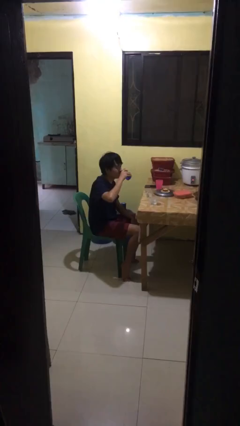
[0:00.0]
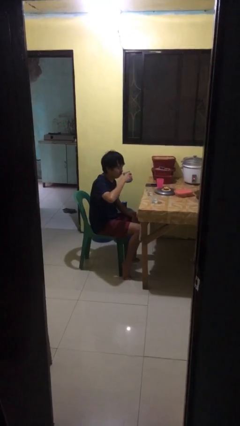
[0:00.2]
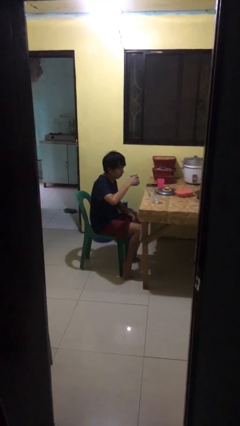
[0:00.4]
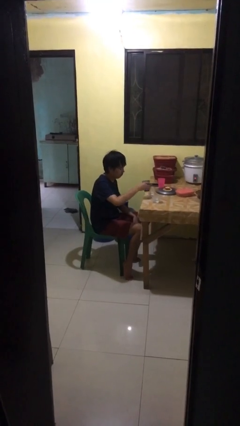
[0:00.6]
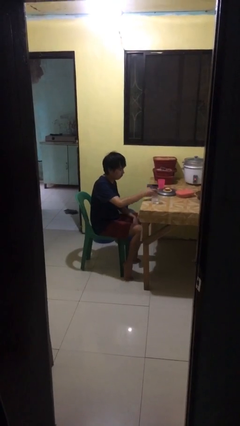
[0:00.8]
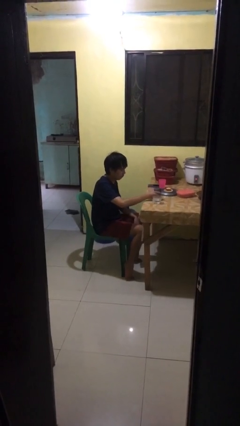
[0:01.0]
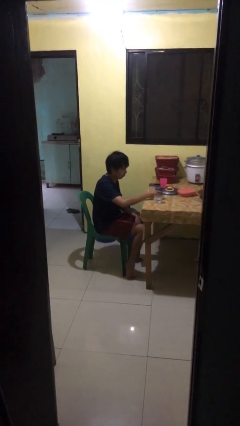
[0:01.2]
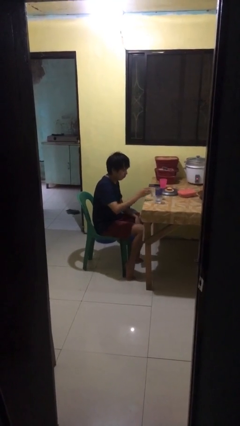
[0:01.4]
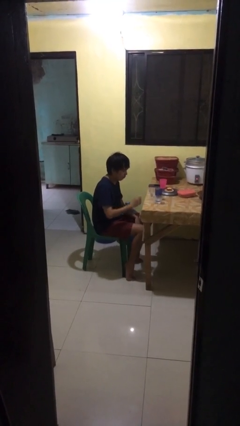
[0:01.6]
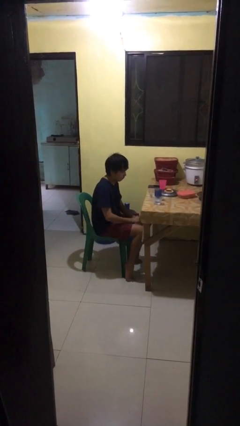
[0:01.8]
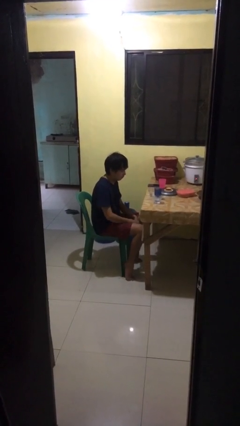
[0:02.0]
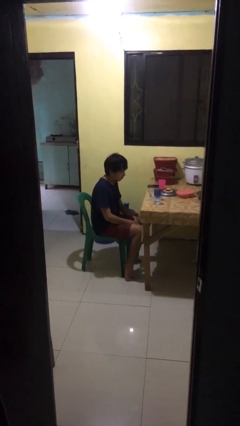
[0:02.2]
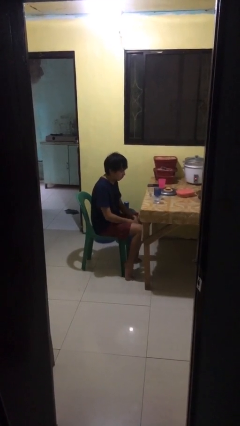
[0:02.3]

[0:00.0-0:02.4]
person puts down object on table

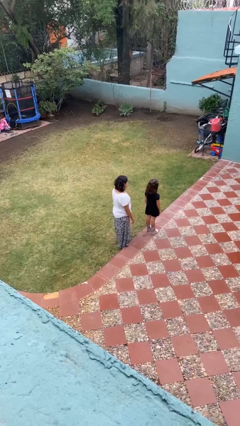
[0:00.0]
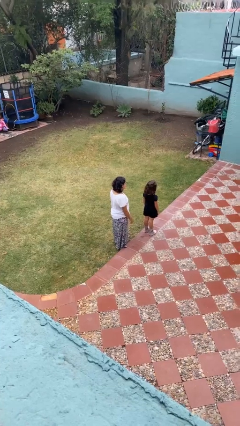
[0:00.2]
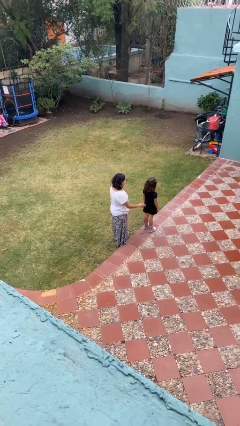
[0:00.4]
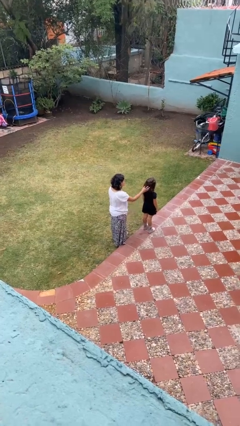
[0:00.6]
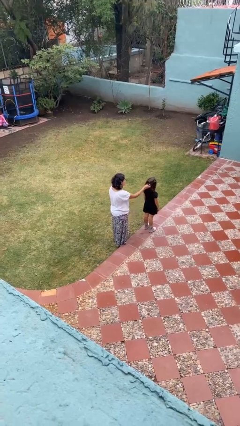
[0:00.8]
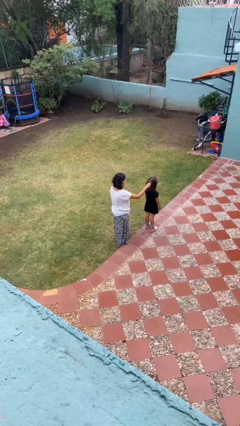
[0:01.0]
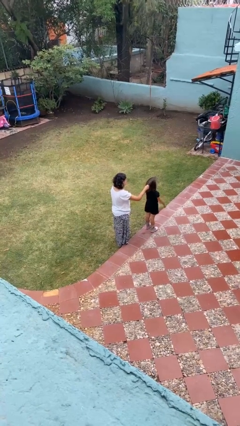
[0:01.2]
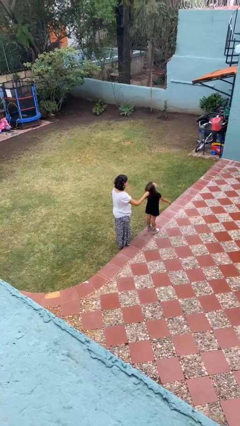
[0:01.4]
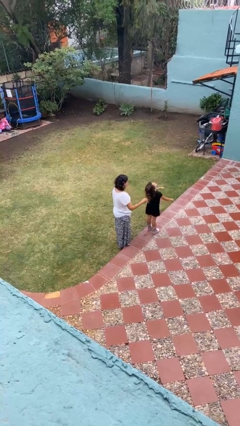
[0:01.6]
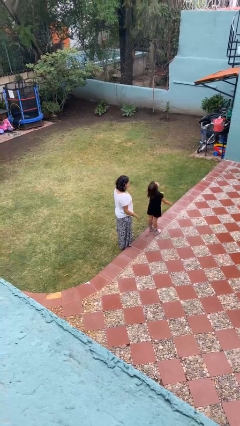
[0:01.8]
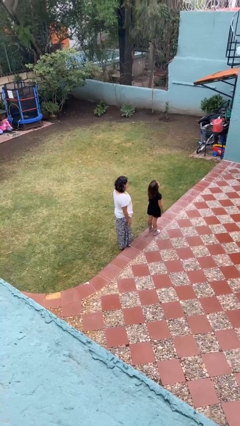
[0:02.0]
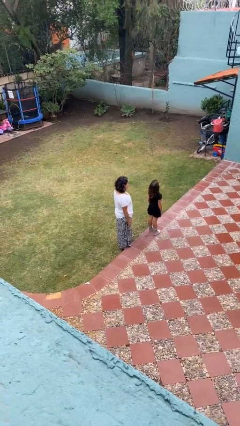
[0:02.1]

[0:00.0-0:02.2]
person grabs person by hair

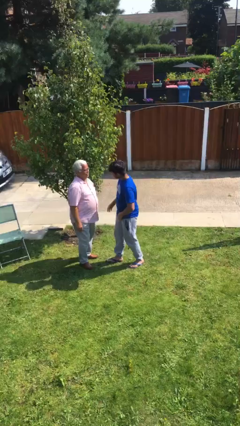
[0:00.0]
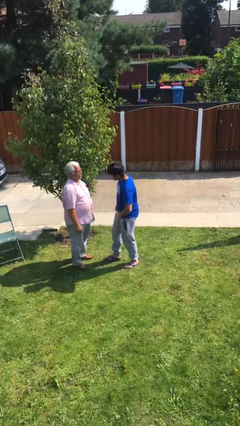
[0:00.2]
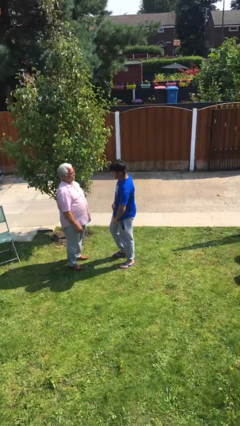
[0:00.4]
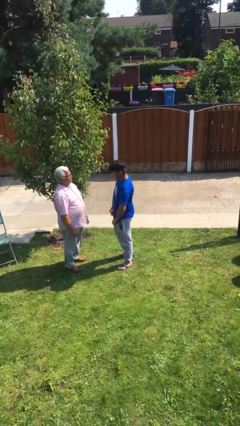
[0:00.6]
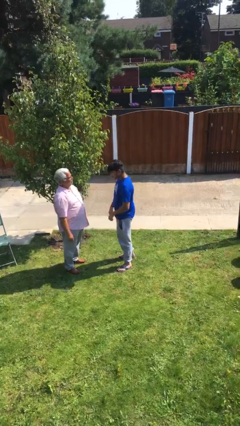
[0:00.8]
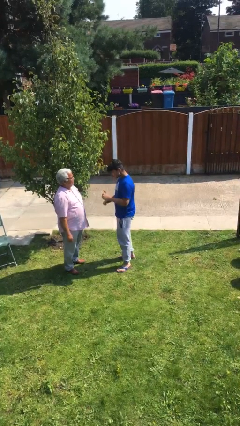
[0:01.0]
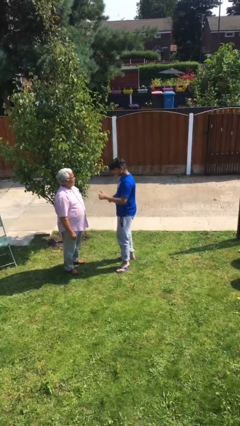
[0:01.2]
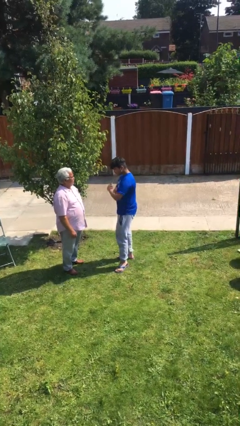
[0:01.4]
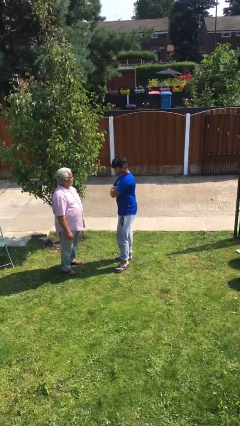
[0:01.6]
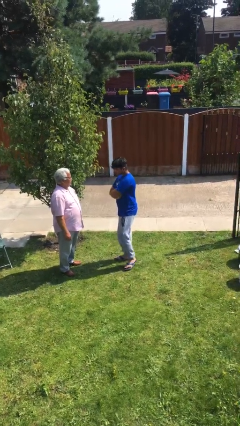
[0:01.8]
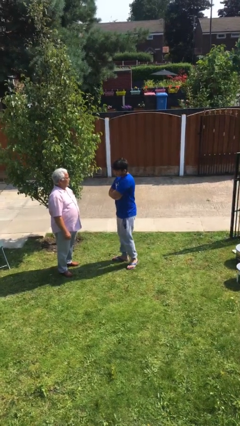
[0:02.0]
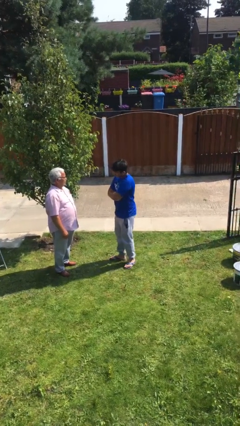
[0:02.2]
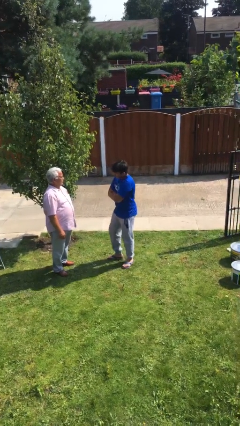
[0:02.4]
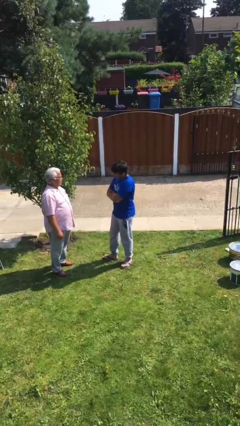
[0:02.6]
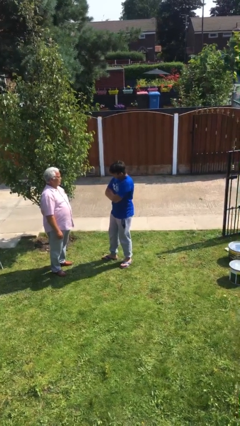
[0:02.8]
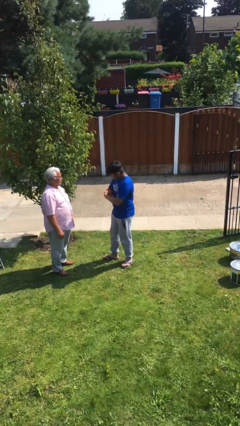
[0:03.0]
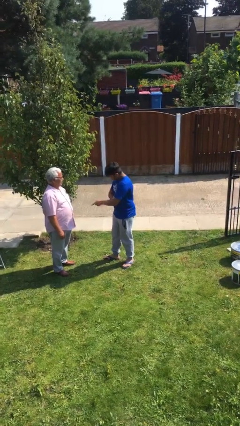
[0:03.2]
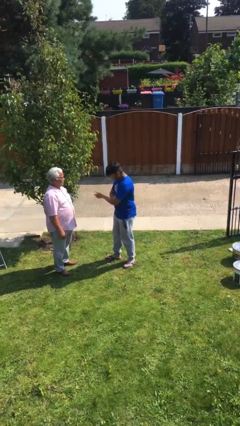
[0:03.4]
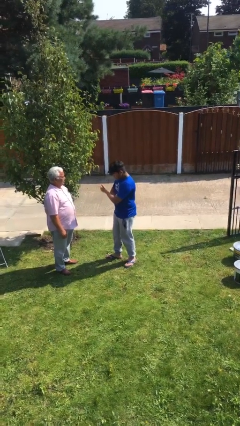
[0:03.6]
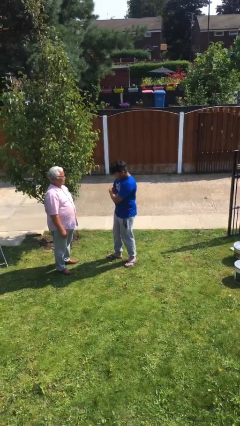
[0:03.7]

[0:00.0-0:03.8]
person talks to person

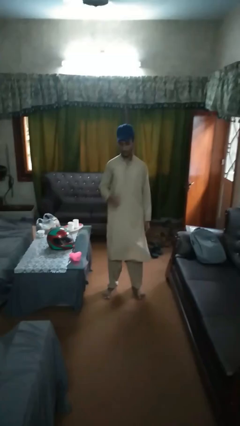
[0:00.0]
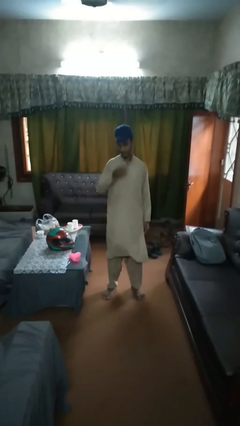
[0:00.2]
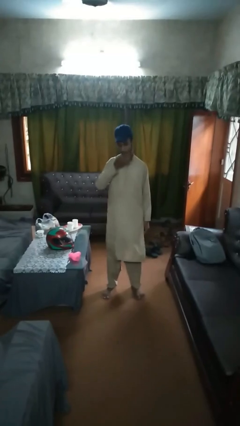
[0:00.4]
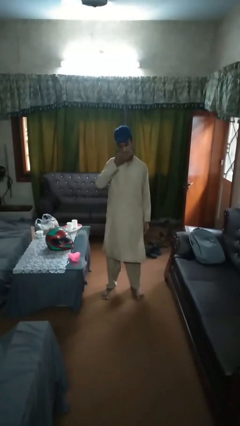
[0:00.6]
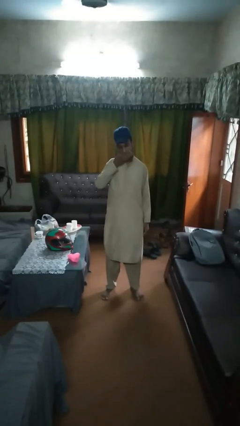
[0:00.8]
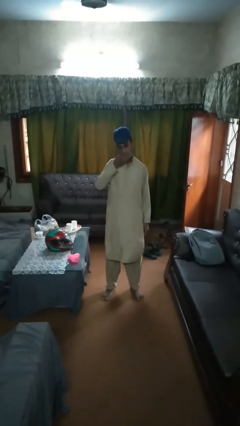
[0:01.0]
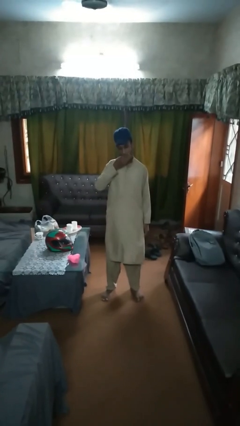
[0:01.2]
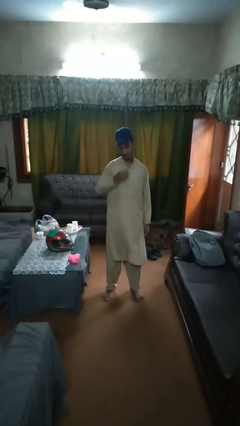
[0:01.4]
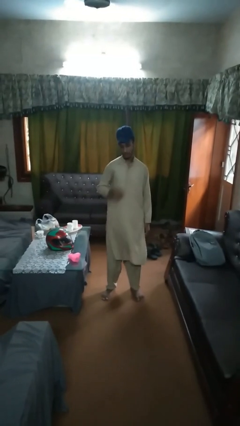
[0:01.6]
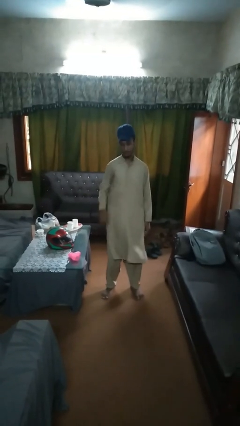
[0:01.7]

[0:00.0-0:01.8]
person eats banana

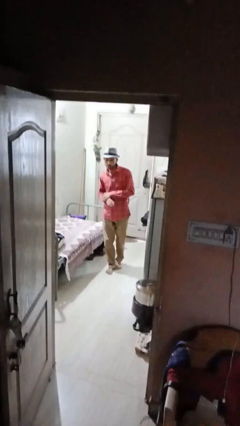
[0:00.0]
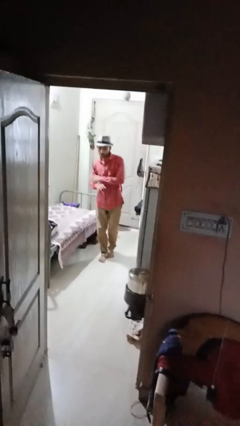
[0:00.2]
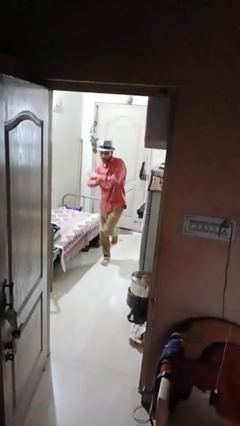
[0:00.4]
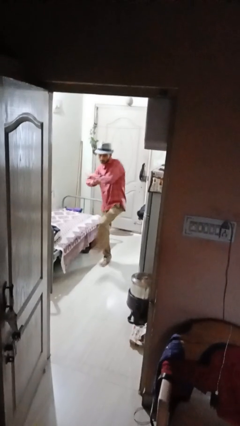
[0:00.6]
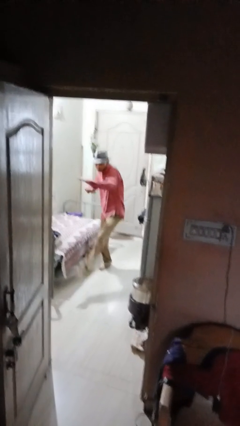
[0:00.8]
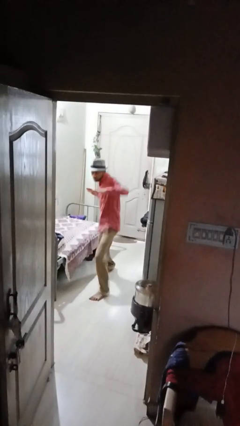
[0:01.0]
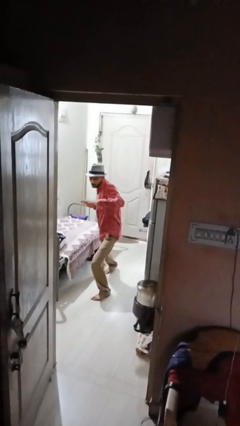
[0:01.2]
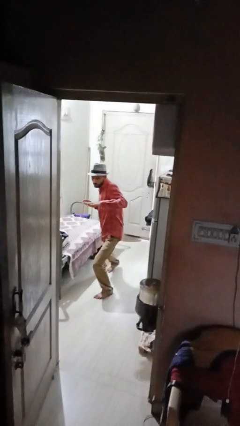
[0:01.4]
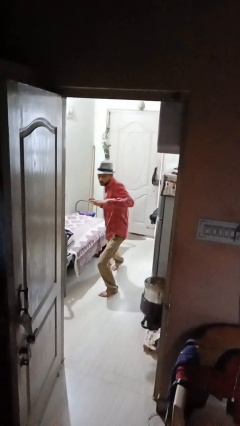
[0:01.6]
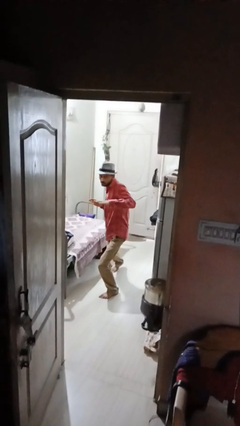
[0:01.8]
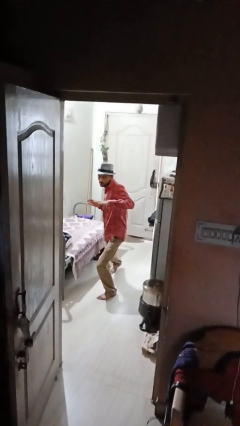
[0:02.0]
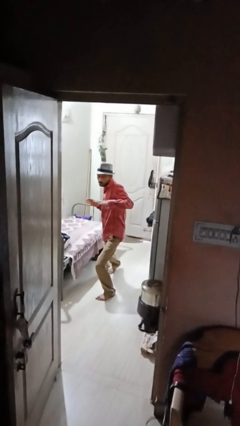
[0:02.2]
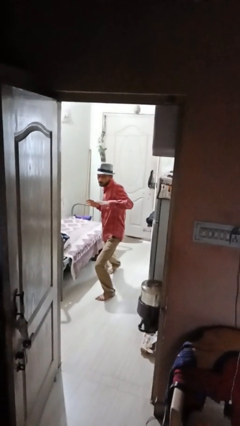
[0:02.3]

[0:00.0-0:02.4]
person karate chop

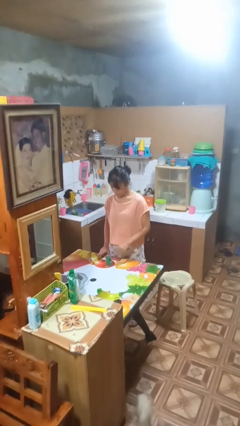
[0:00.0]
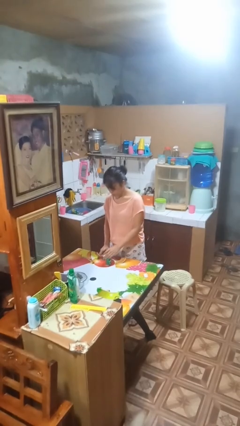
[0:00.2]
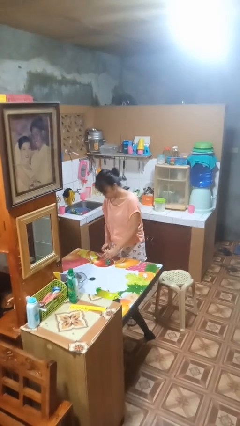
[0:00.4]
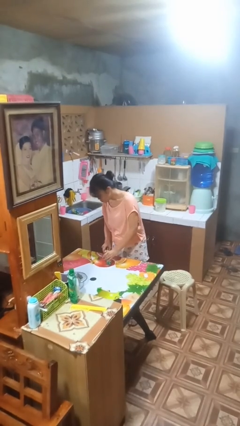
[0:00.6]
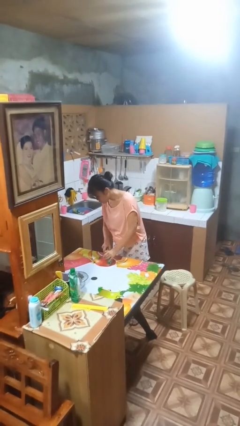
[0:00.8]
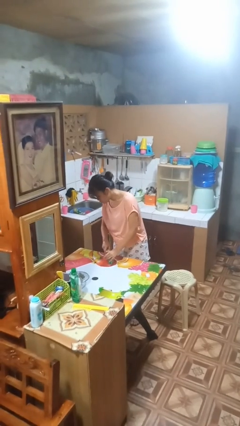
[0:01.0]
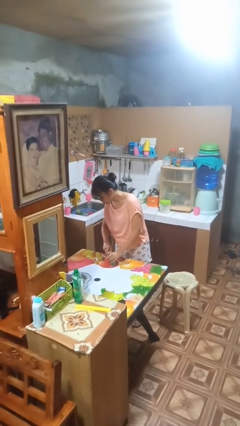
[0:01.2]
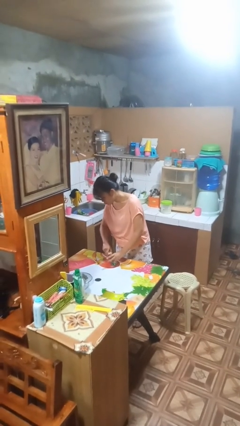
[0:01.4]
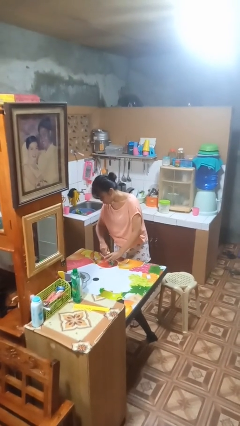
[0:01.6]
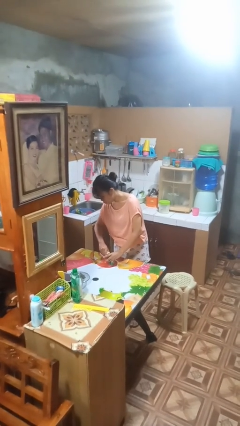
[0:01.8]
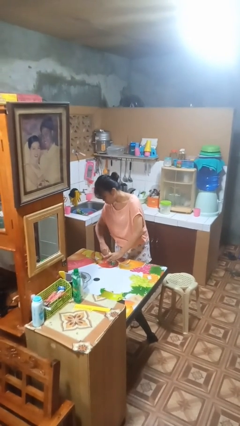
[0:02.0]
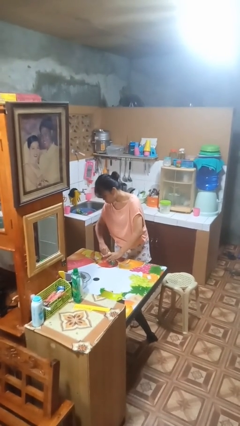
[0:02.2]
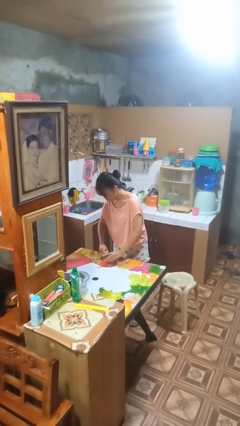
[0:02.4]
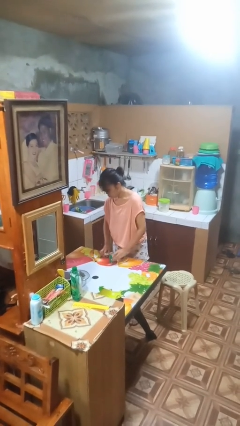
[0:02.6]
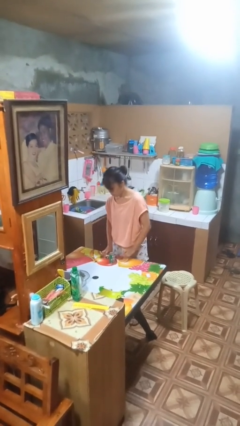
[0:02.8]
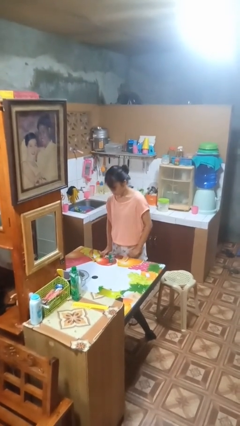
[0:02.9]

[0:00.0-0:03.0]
person opens can with can opener

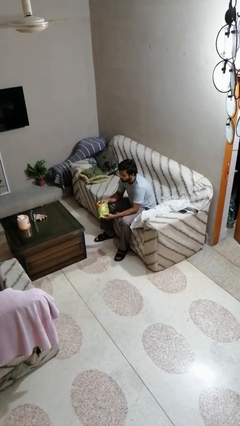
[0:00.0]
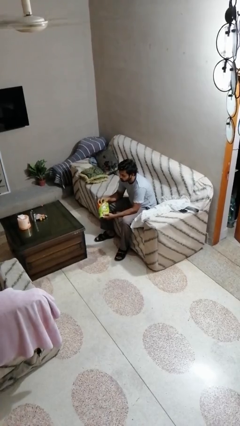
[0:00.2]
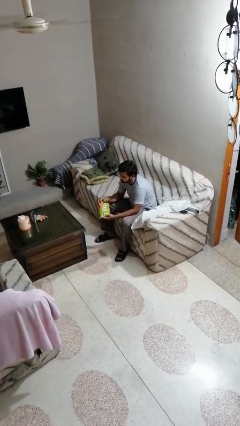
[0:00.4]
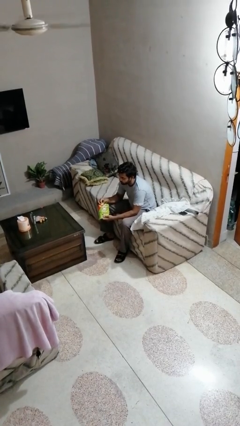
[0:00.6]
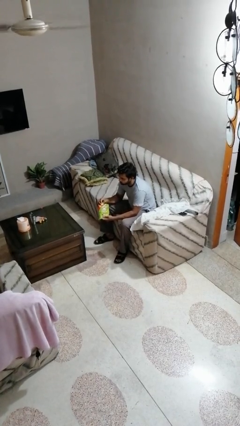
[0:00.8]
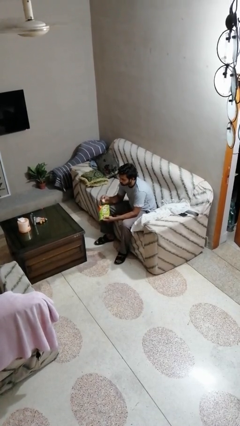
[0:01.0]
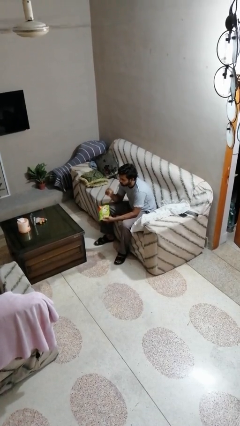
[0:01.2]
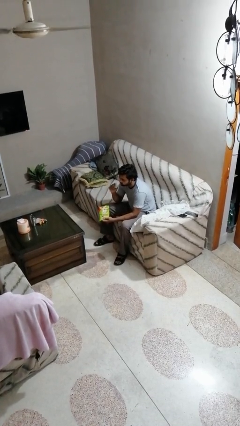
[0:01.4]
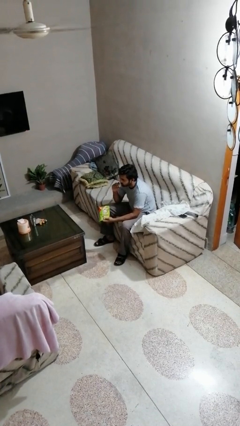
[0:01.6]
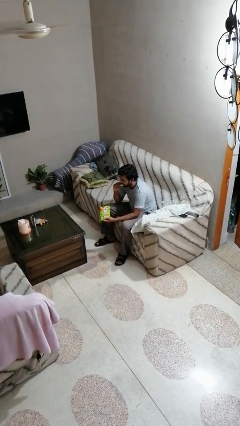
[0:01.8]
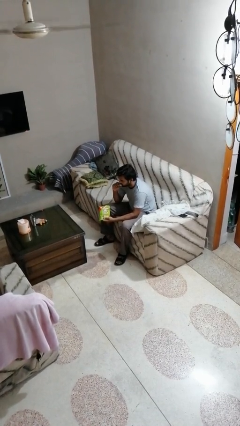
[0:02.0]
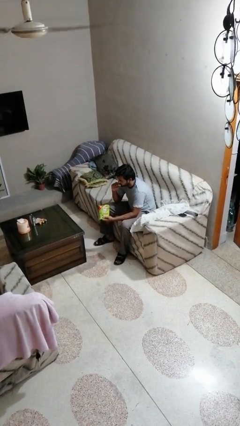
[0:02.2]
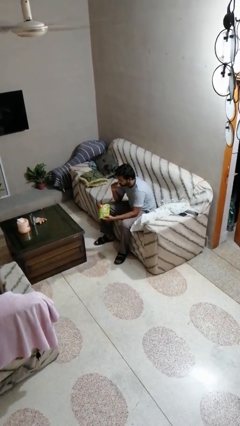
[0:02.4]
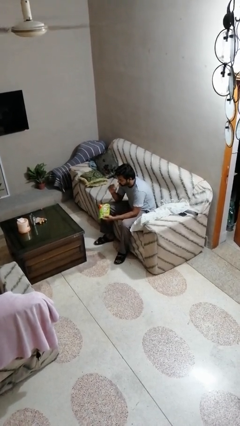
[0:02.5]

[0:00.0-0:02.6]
person eats snack from bag
